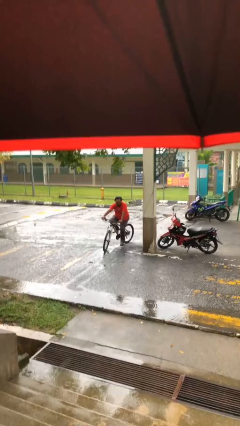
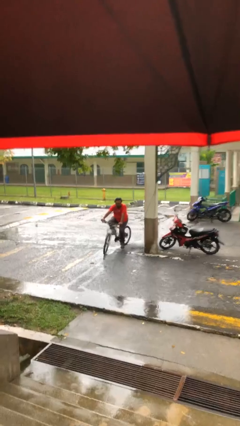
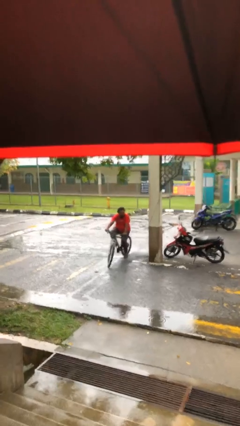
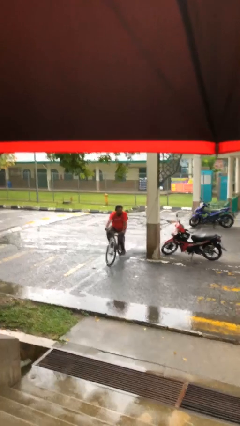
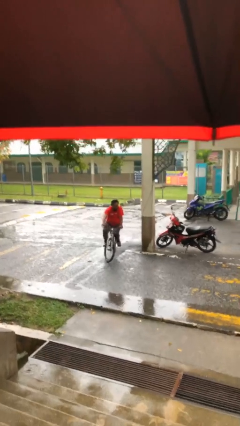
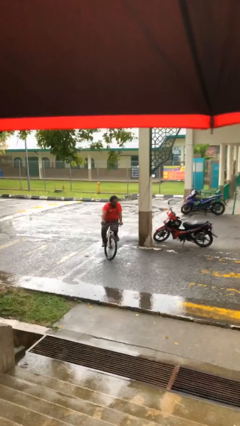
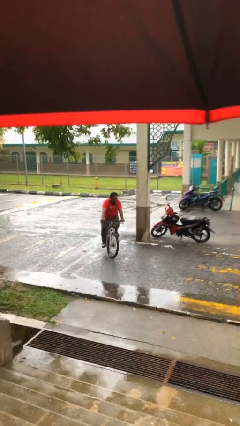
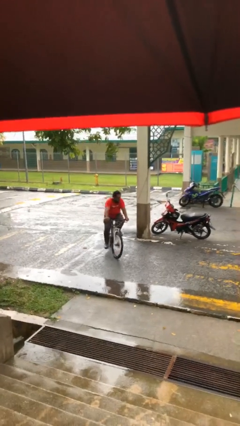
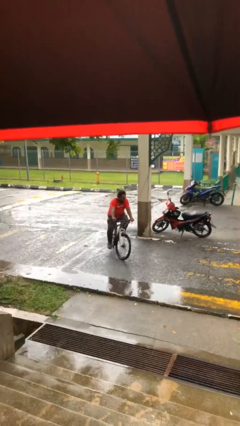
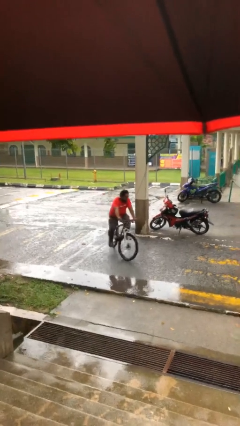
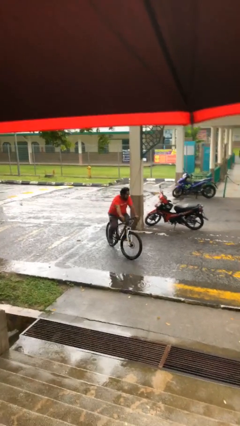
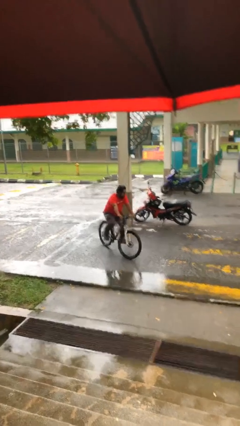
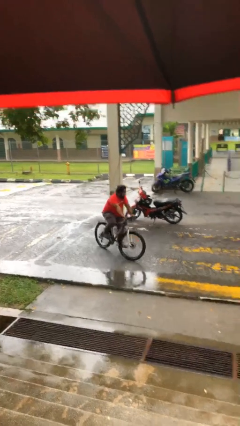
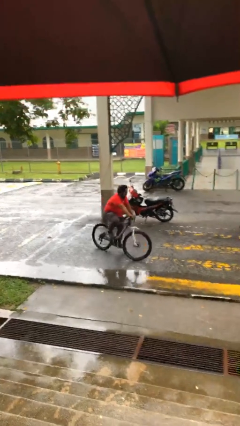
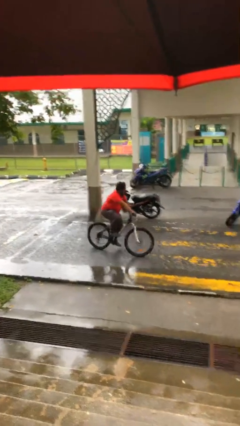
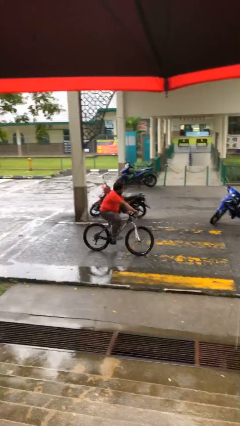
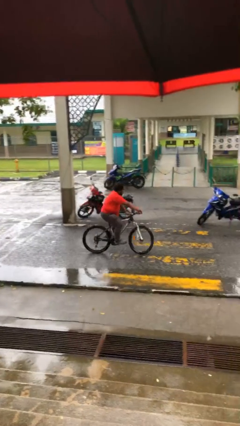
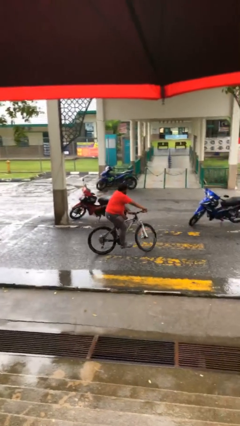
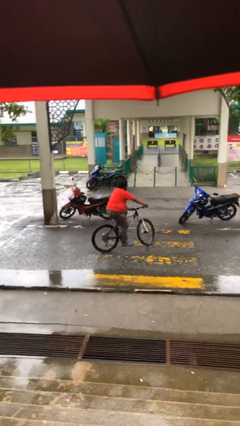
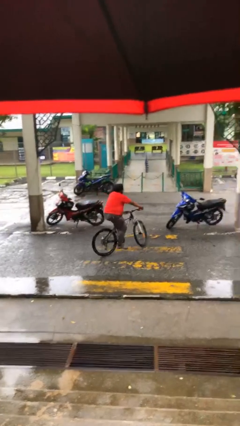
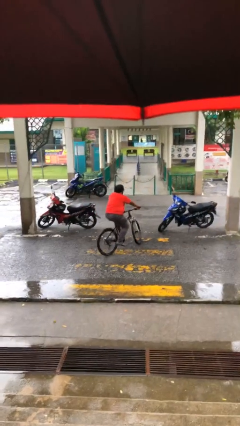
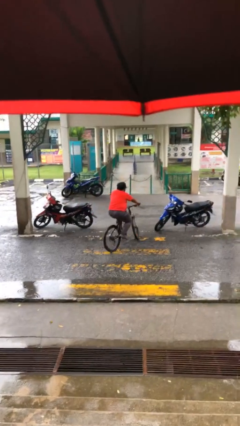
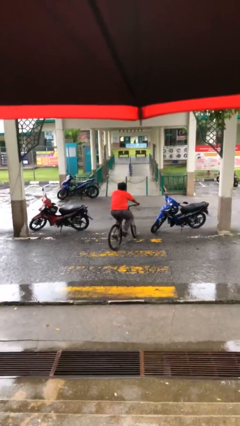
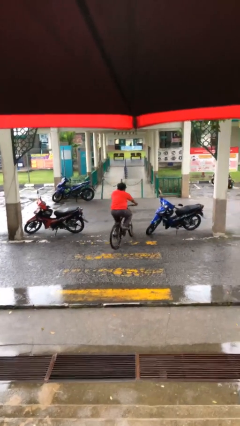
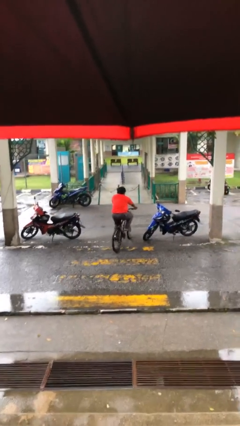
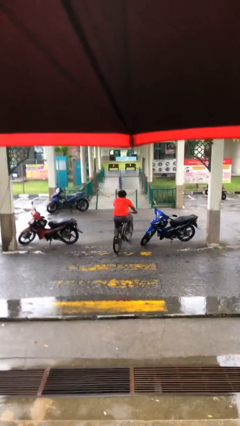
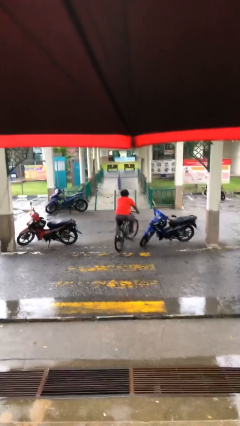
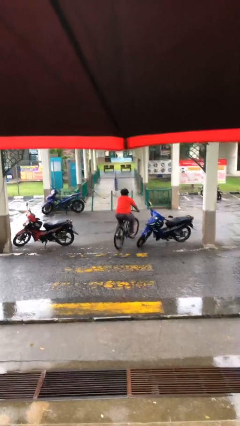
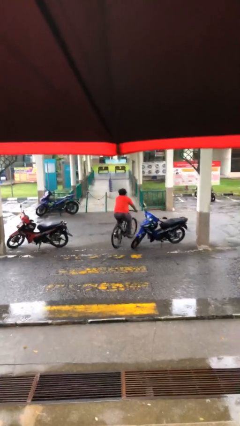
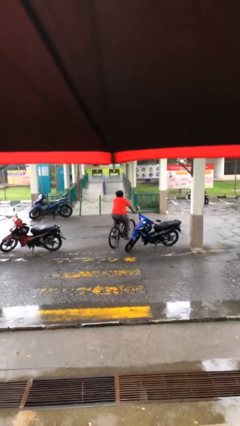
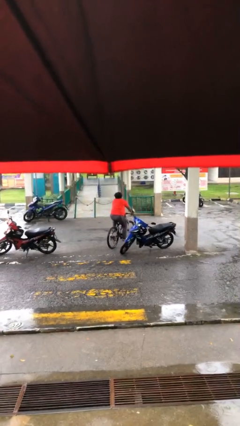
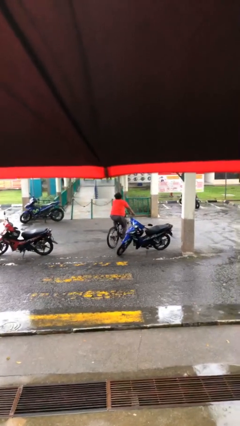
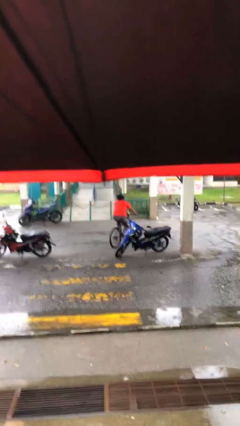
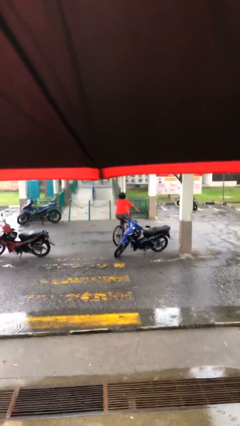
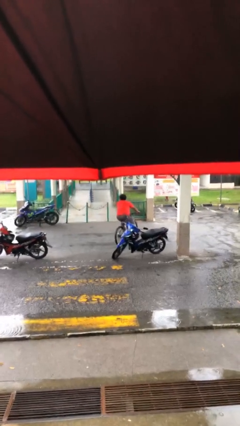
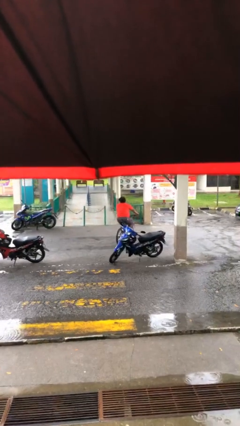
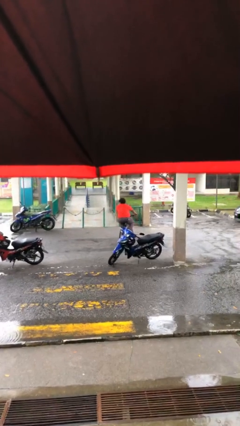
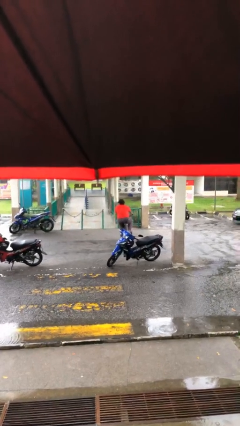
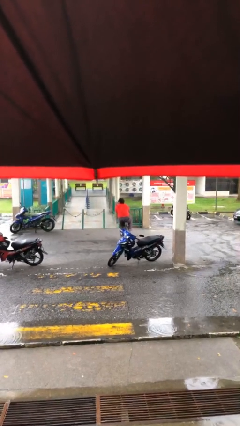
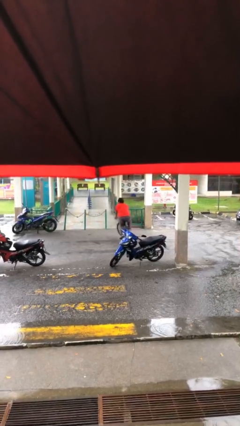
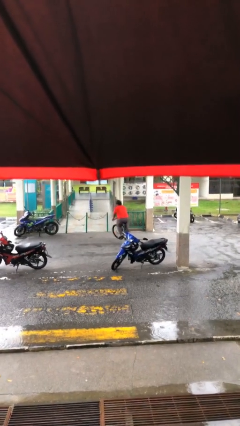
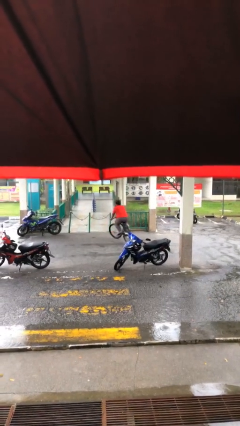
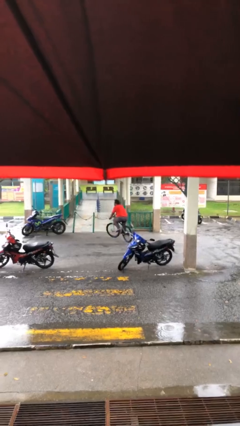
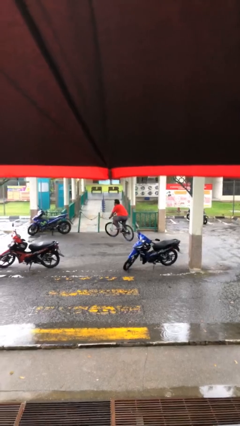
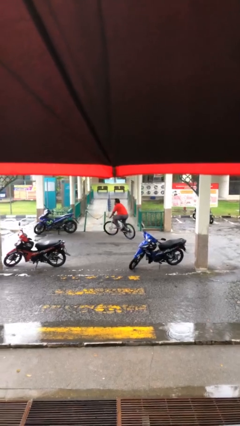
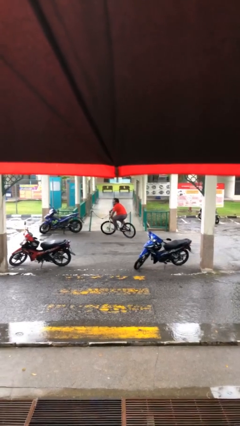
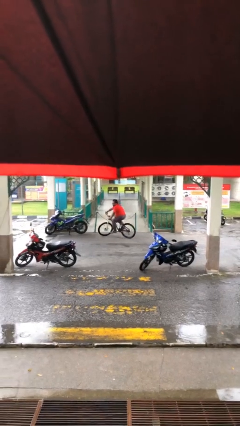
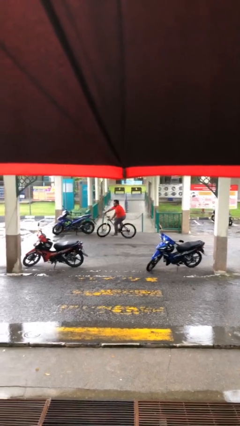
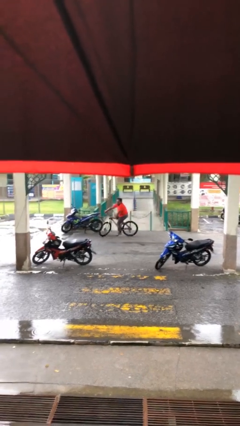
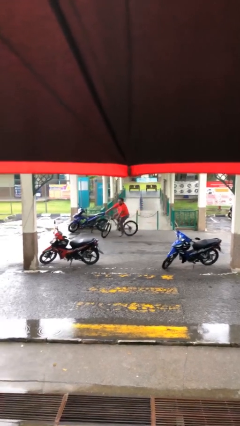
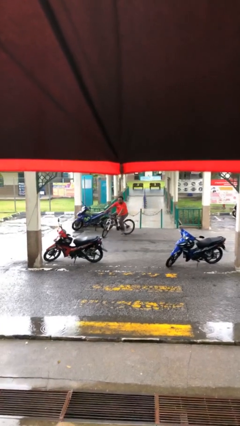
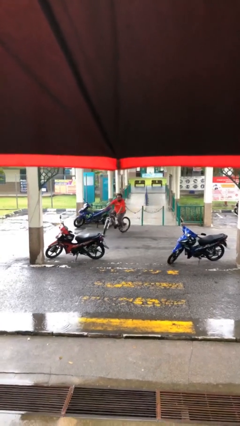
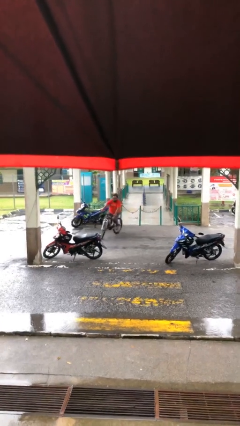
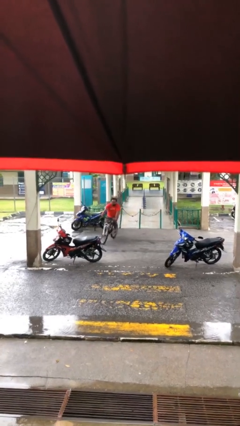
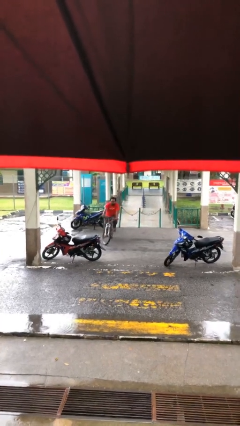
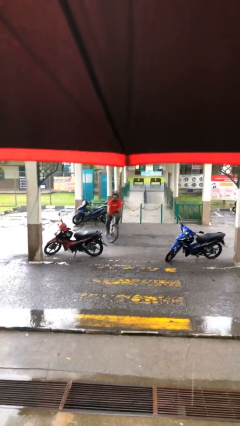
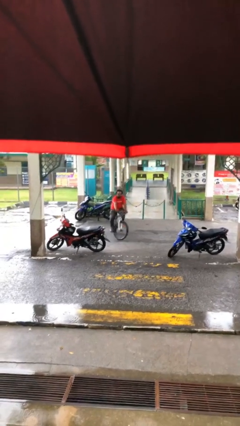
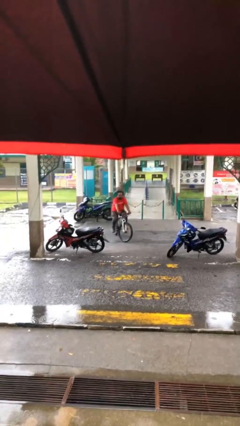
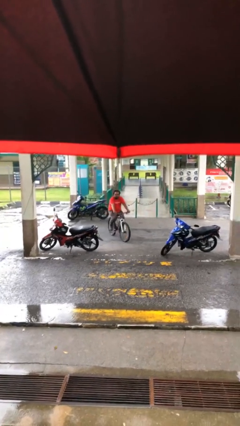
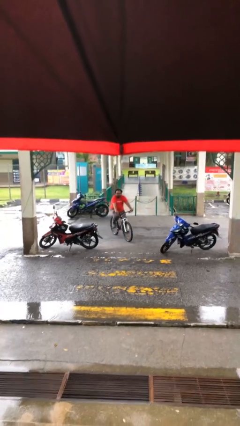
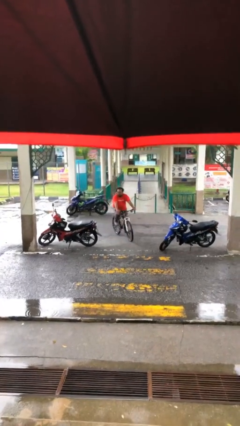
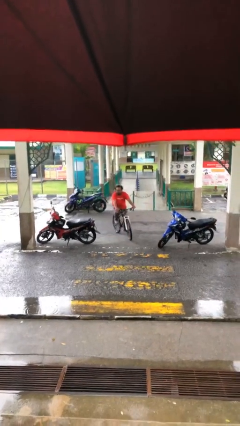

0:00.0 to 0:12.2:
person rides bicycle

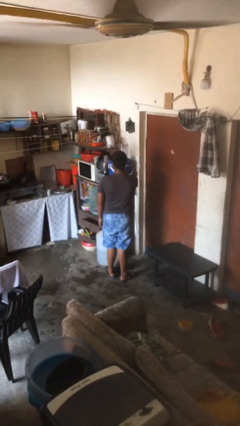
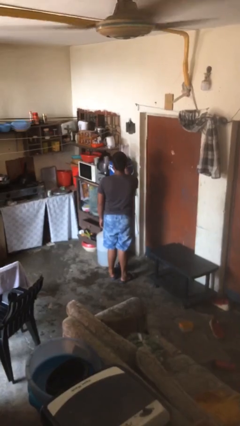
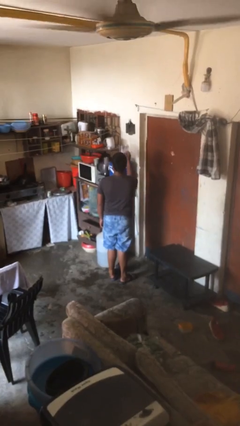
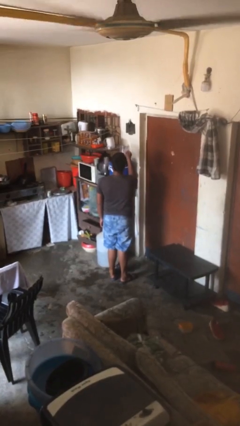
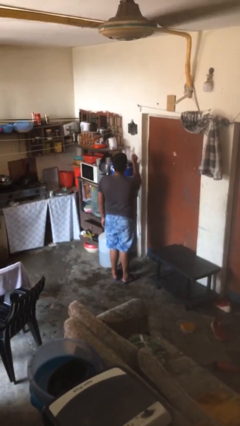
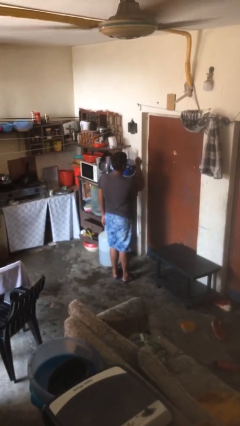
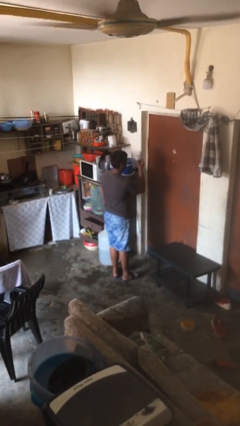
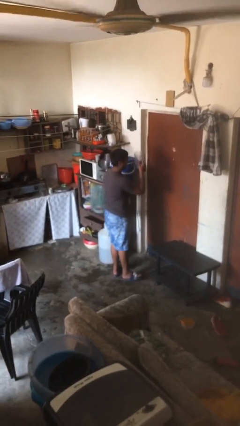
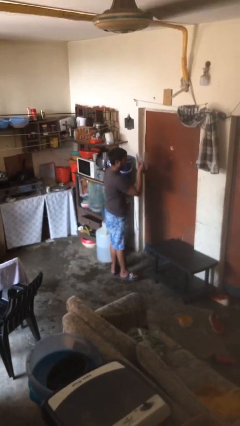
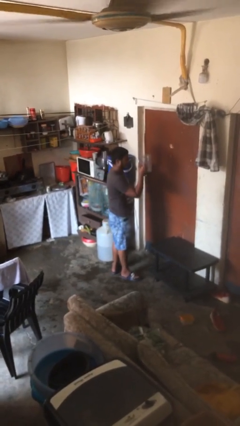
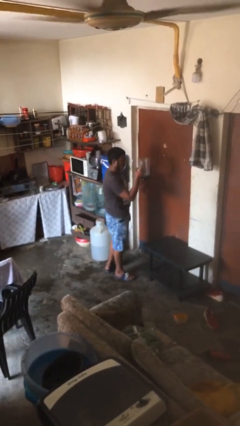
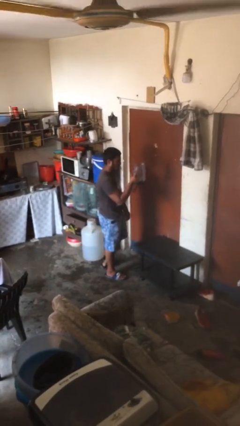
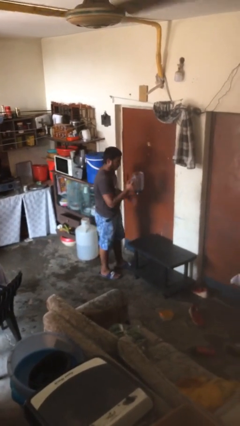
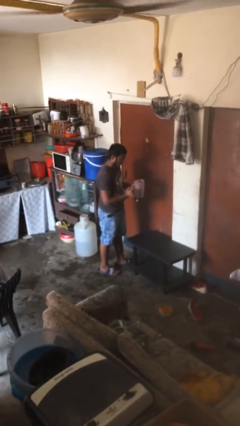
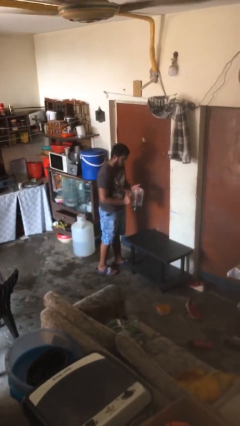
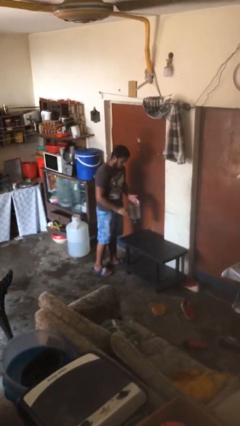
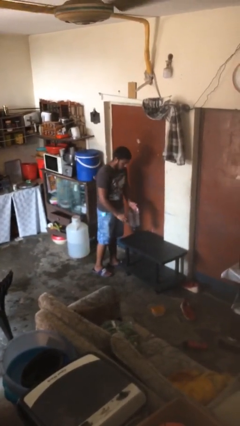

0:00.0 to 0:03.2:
person picks up object from shelf

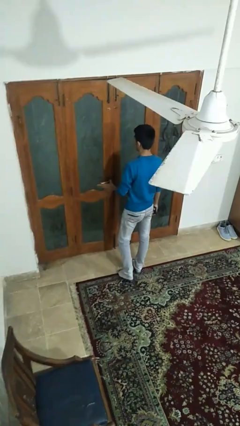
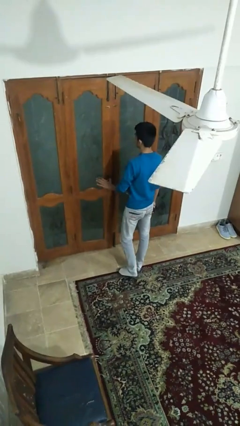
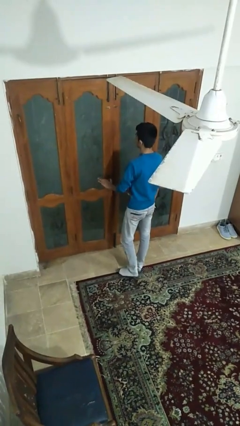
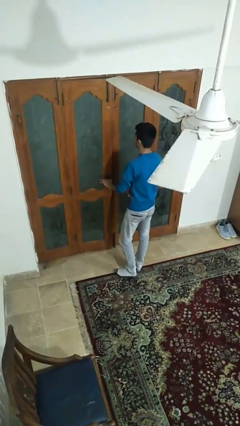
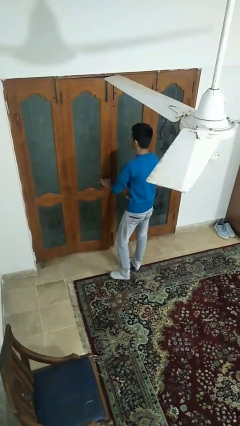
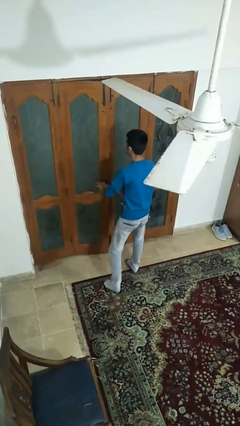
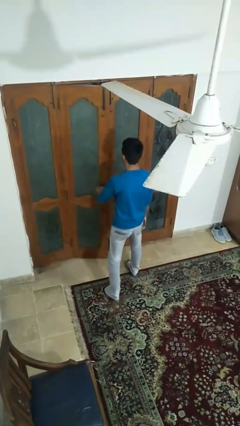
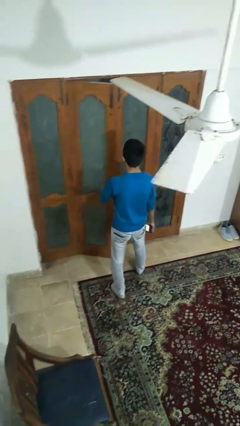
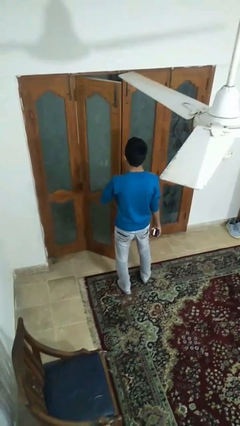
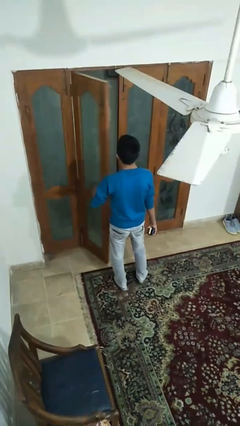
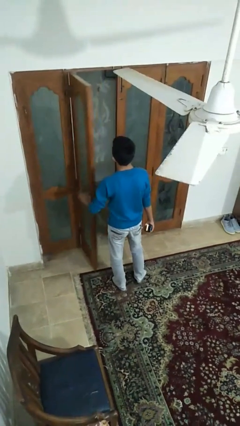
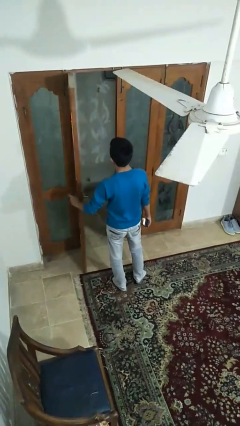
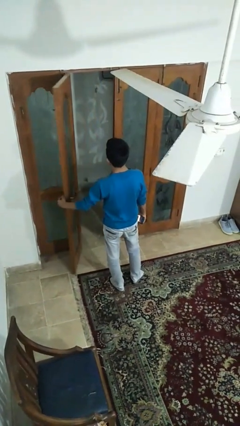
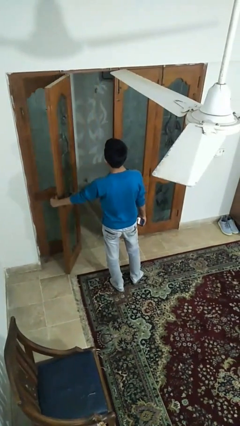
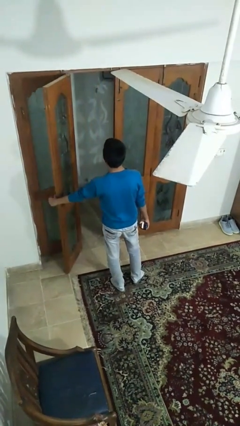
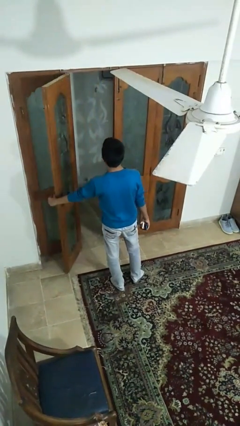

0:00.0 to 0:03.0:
person opens facility door
